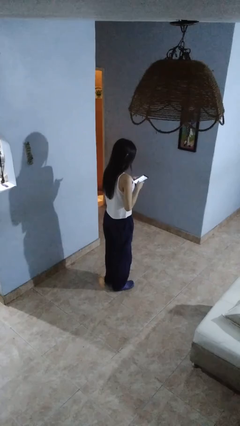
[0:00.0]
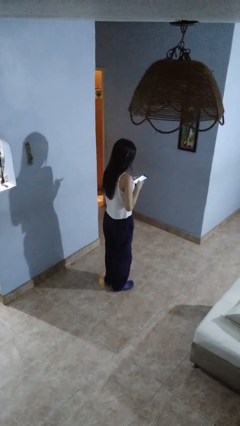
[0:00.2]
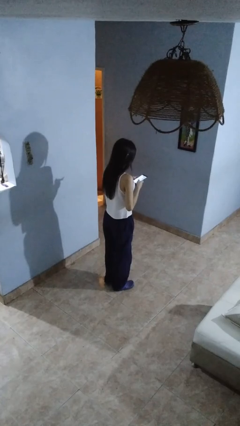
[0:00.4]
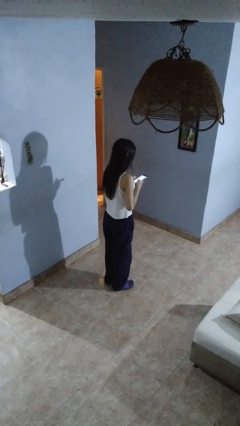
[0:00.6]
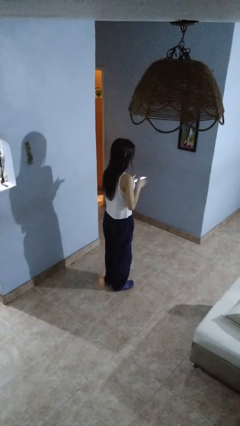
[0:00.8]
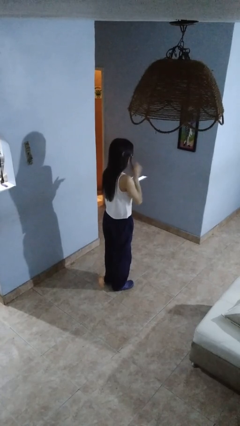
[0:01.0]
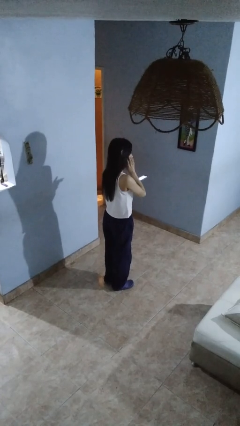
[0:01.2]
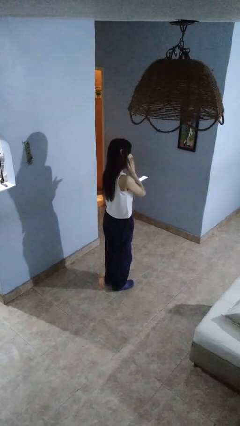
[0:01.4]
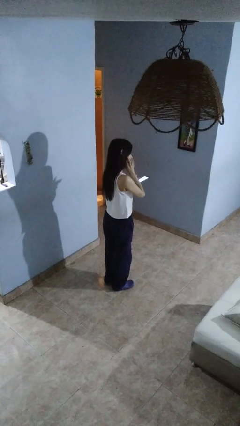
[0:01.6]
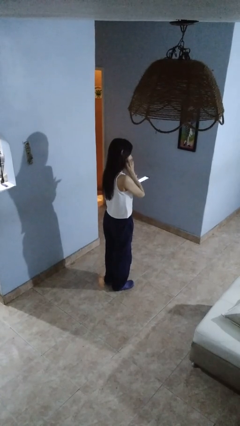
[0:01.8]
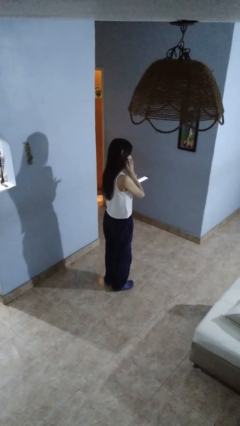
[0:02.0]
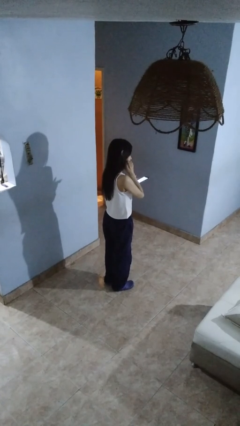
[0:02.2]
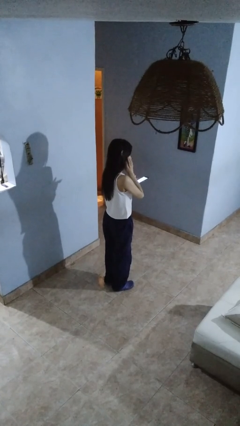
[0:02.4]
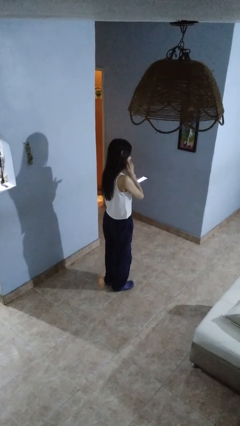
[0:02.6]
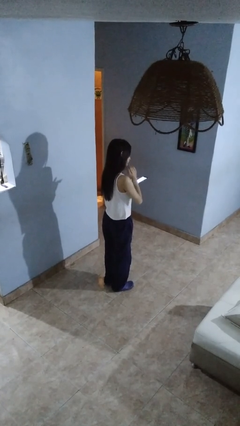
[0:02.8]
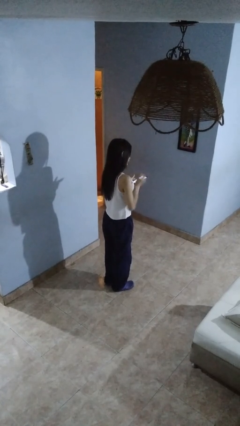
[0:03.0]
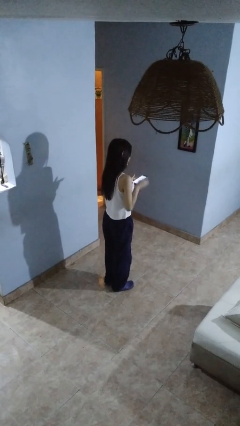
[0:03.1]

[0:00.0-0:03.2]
person scratches face

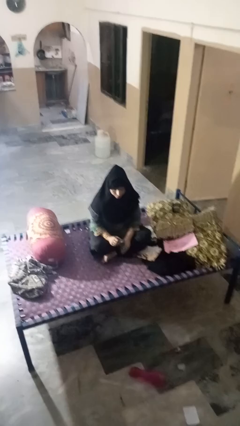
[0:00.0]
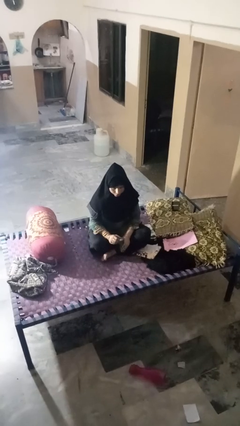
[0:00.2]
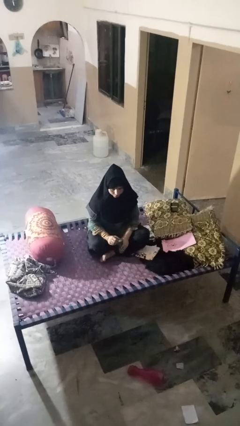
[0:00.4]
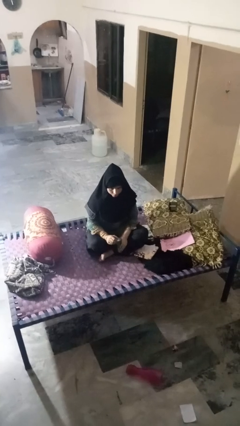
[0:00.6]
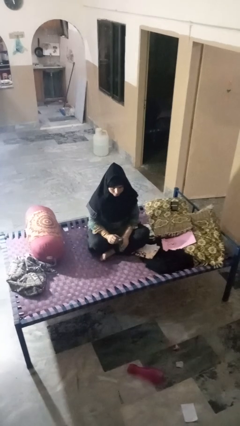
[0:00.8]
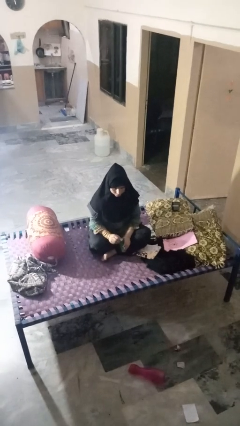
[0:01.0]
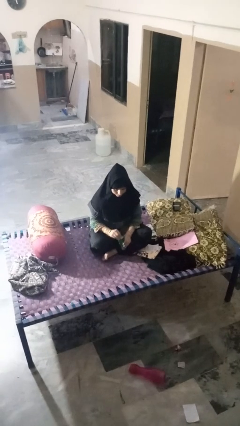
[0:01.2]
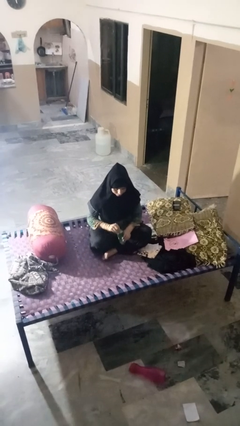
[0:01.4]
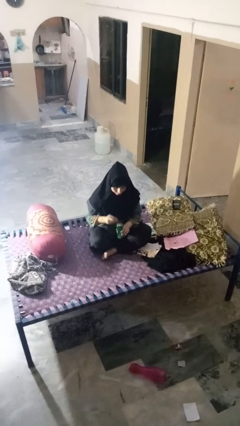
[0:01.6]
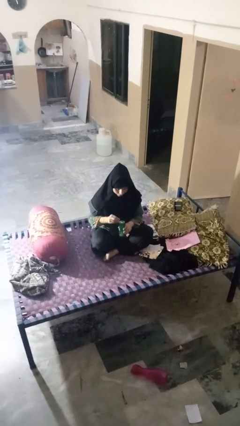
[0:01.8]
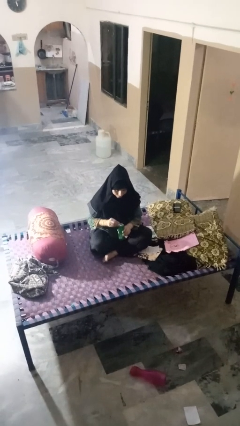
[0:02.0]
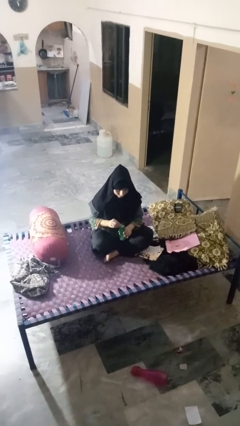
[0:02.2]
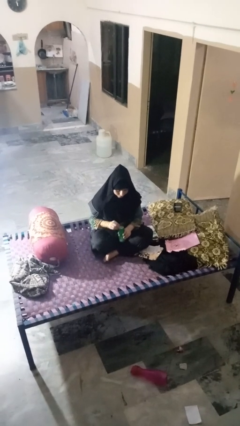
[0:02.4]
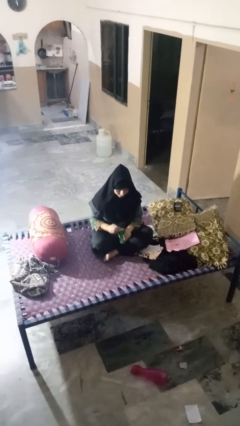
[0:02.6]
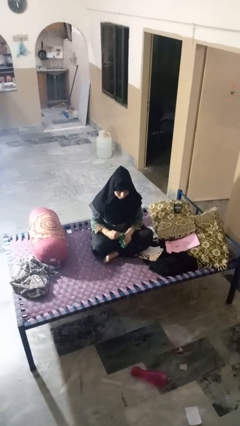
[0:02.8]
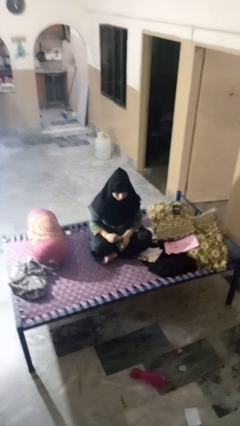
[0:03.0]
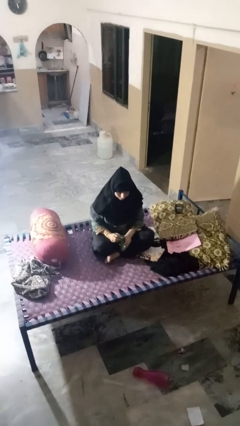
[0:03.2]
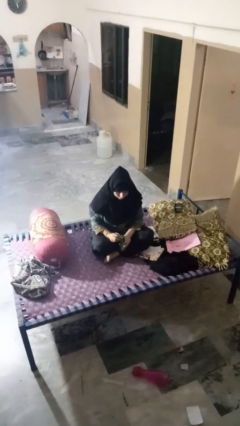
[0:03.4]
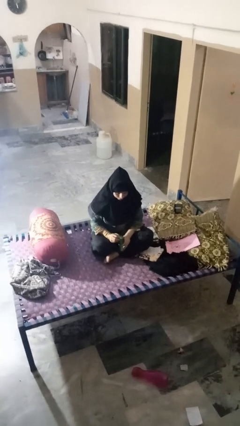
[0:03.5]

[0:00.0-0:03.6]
person opens can with can opener

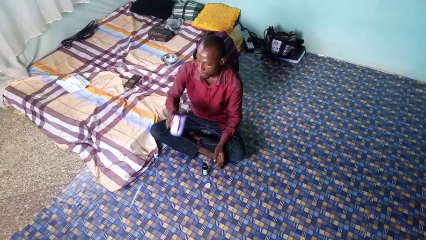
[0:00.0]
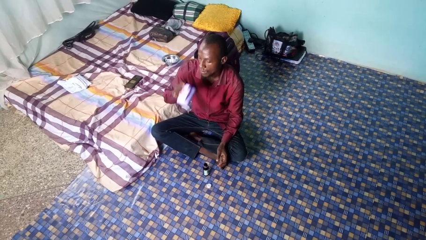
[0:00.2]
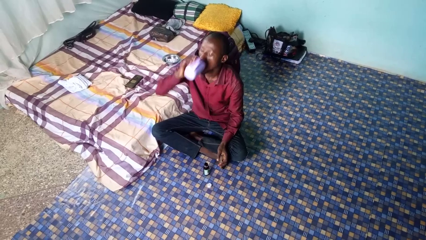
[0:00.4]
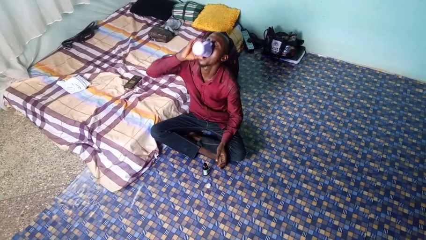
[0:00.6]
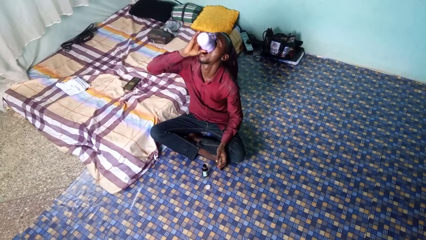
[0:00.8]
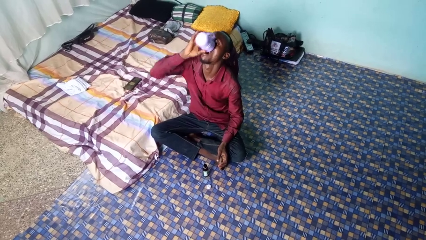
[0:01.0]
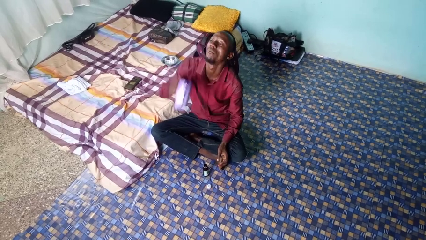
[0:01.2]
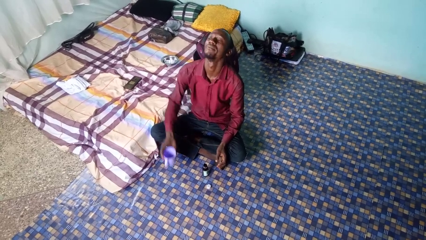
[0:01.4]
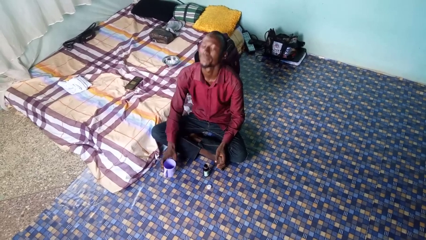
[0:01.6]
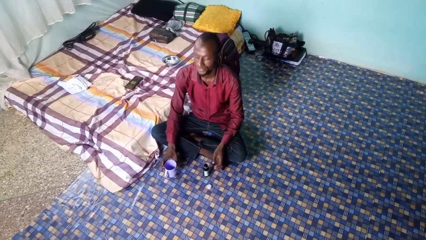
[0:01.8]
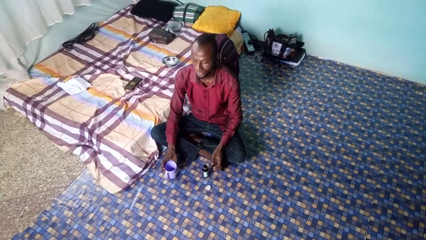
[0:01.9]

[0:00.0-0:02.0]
person drinks from cup

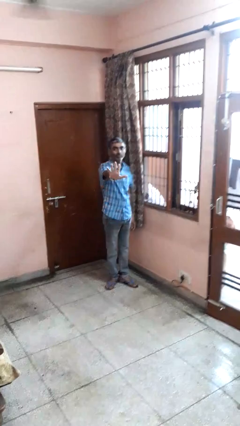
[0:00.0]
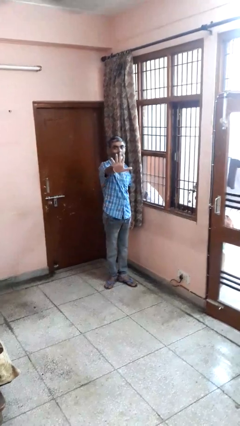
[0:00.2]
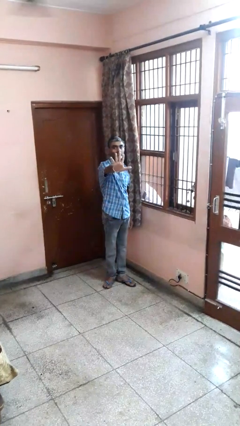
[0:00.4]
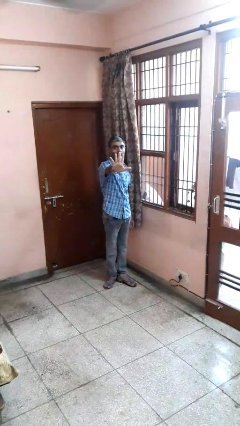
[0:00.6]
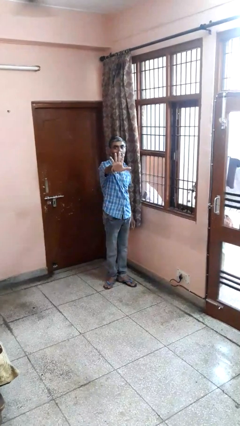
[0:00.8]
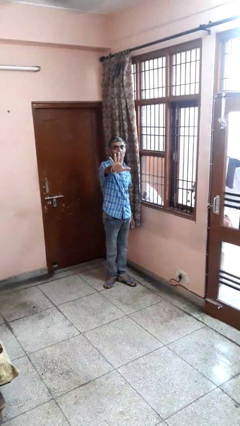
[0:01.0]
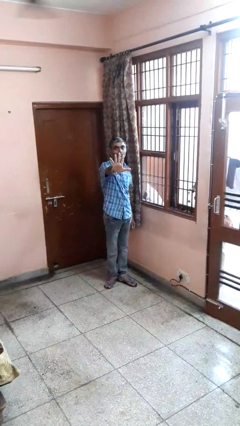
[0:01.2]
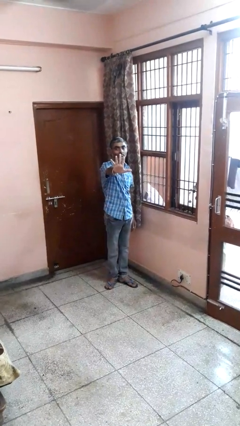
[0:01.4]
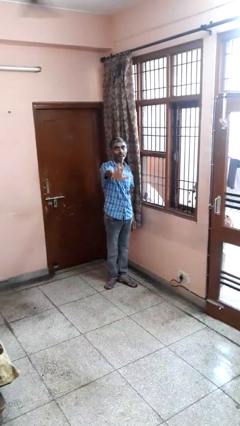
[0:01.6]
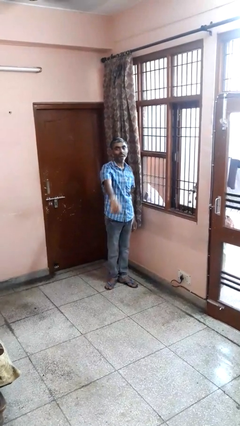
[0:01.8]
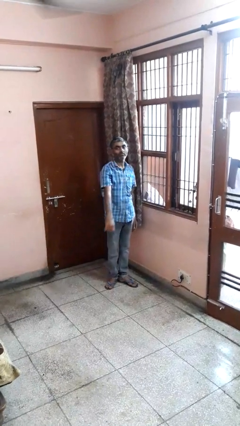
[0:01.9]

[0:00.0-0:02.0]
person gestures number five

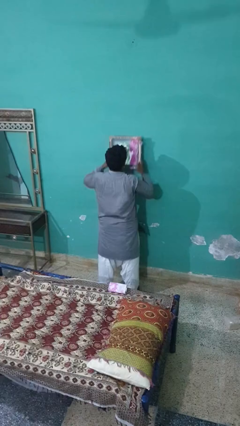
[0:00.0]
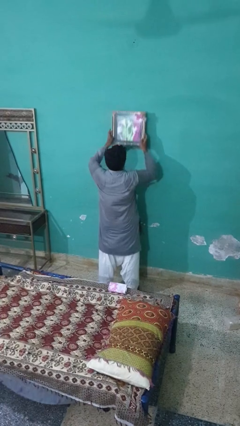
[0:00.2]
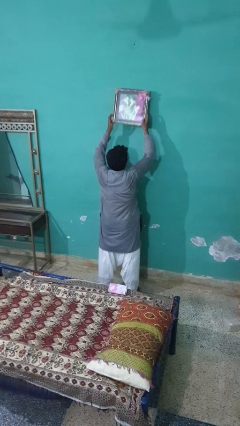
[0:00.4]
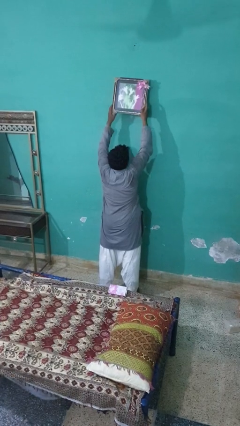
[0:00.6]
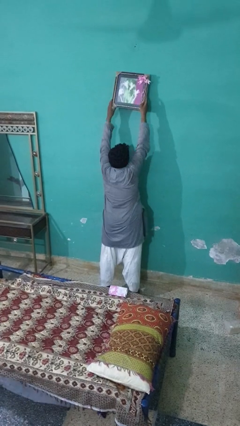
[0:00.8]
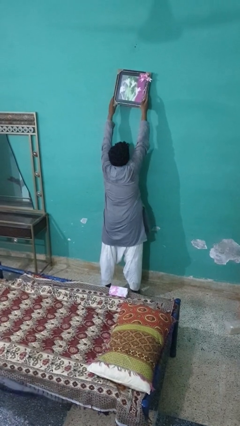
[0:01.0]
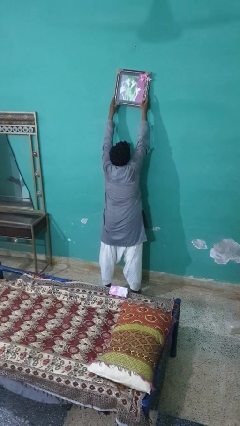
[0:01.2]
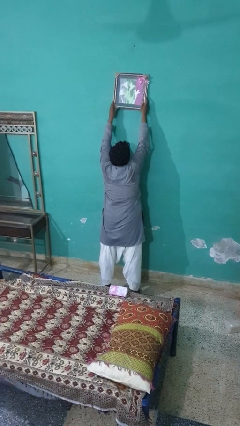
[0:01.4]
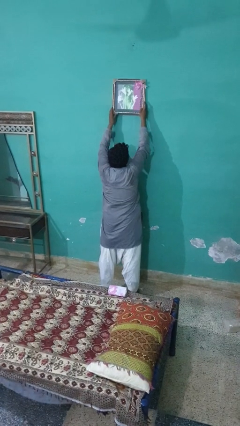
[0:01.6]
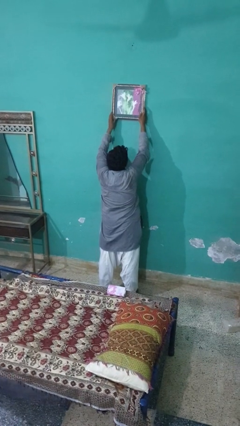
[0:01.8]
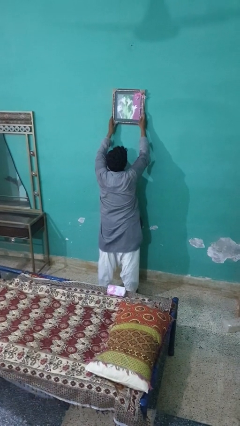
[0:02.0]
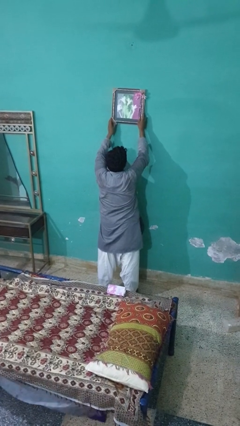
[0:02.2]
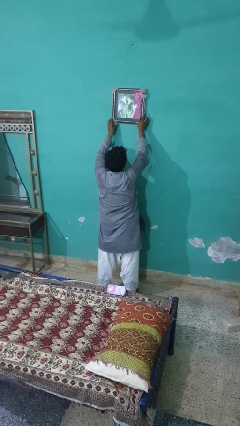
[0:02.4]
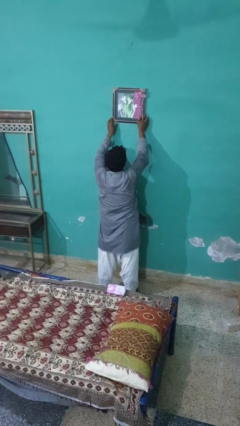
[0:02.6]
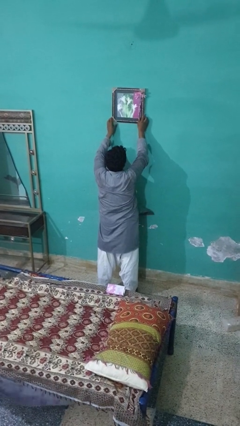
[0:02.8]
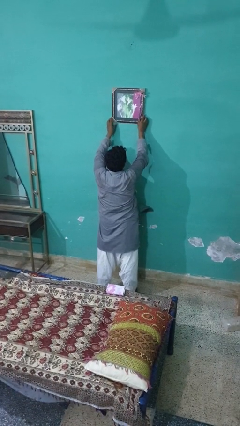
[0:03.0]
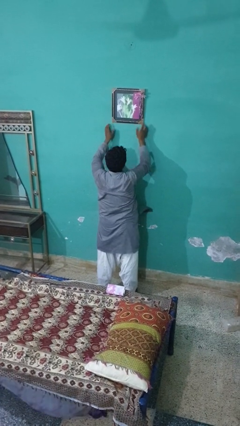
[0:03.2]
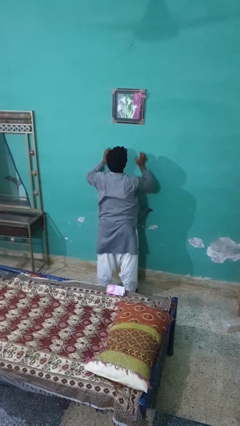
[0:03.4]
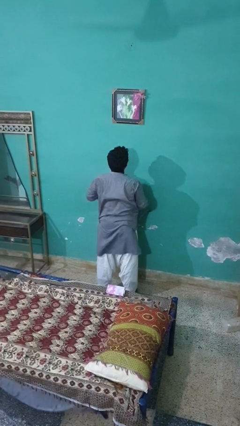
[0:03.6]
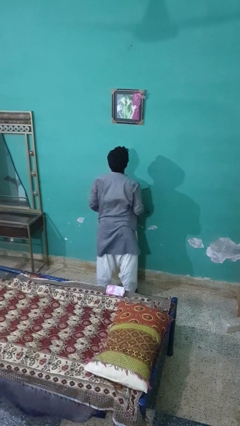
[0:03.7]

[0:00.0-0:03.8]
person puts up picture frame

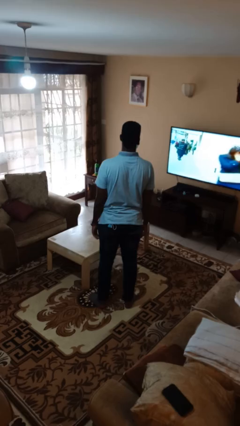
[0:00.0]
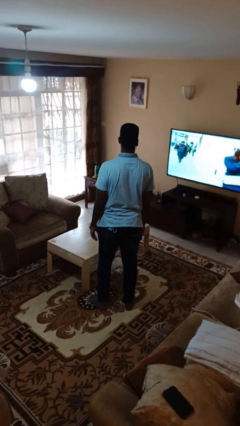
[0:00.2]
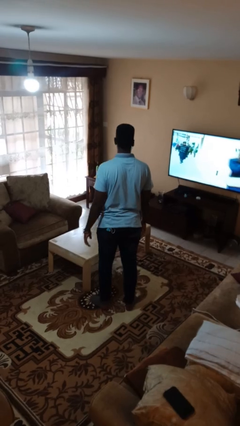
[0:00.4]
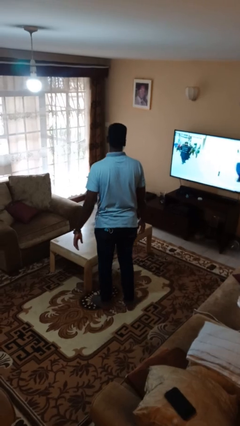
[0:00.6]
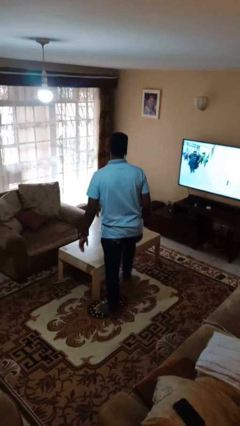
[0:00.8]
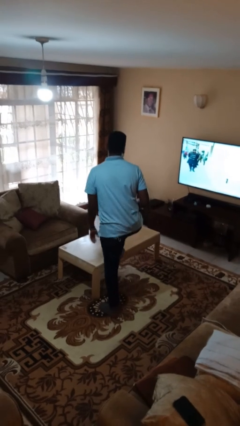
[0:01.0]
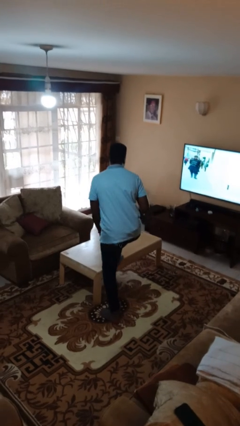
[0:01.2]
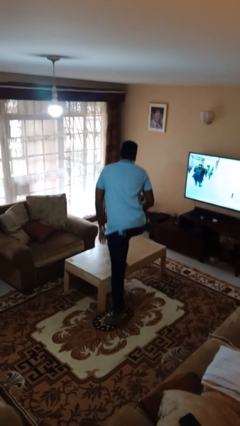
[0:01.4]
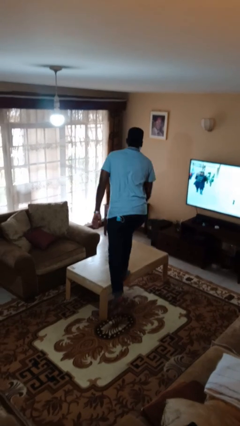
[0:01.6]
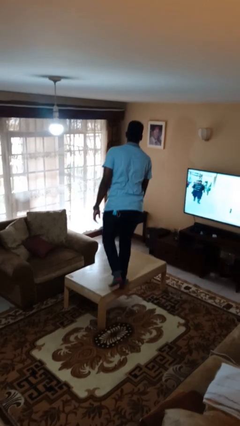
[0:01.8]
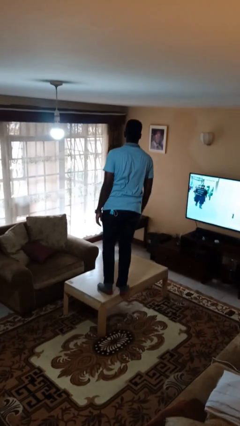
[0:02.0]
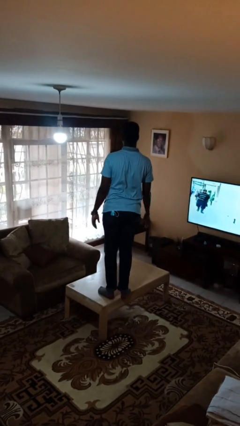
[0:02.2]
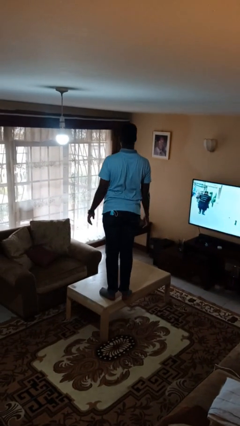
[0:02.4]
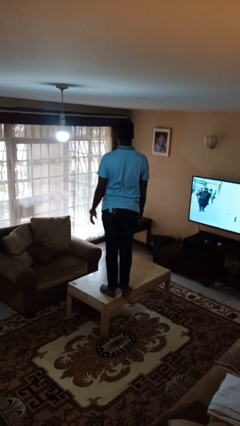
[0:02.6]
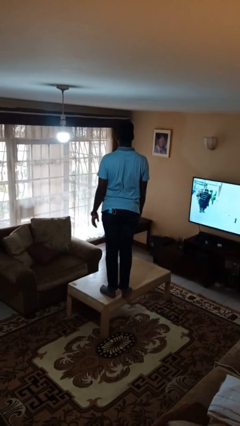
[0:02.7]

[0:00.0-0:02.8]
person climbs on table
